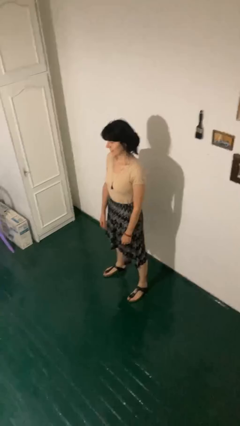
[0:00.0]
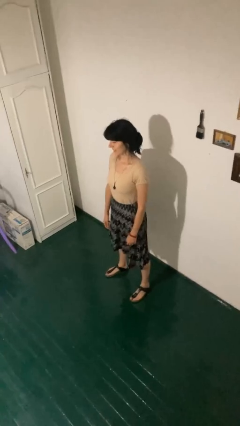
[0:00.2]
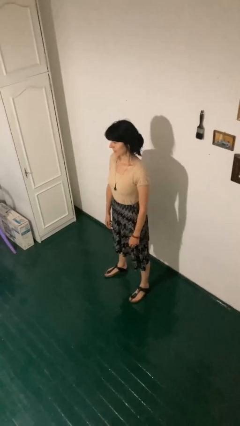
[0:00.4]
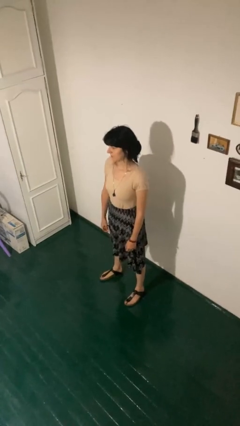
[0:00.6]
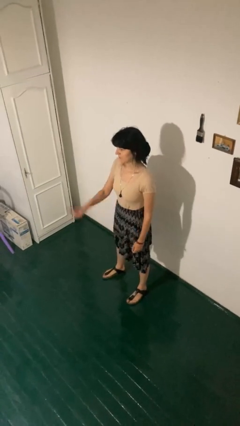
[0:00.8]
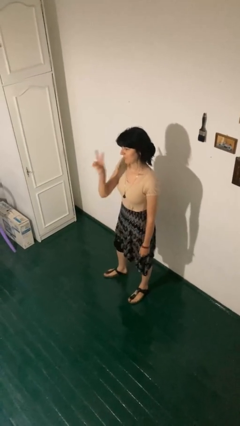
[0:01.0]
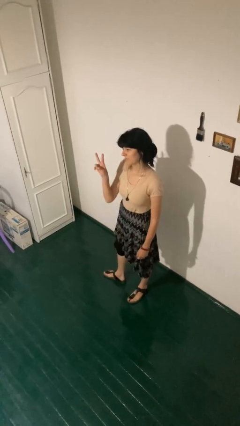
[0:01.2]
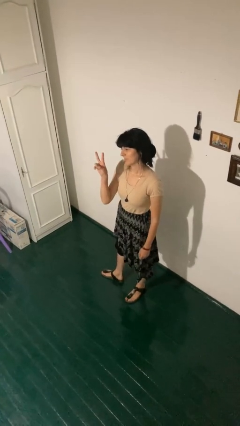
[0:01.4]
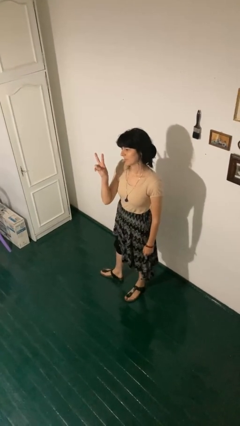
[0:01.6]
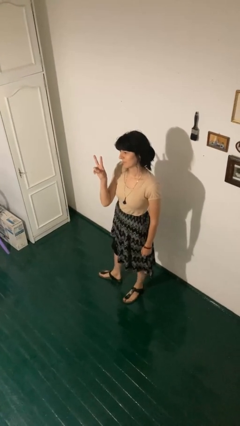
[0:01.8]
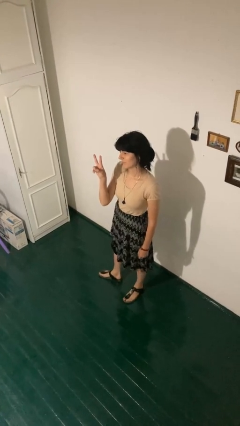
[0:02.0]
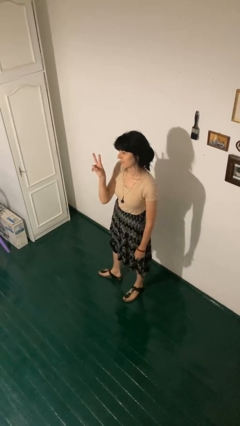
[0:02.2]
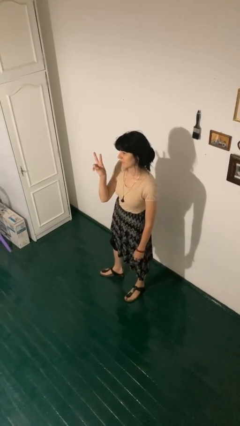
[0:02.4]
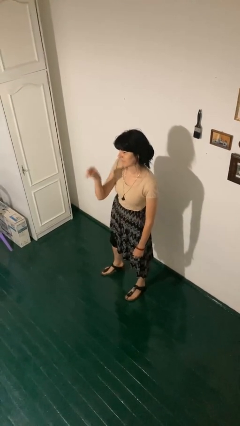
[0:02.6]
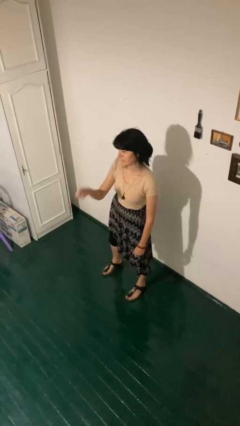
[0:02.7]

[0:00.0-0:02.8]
person gestures peace

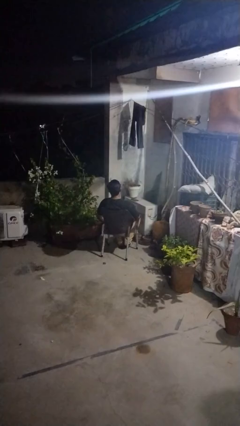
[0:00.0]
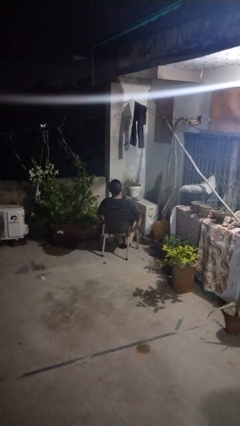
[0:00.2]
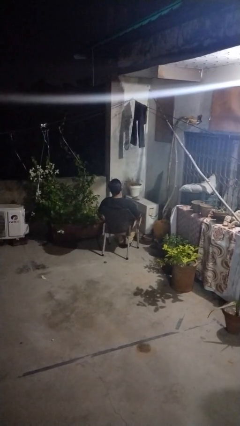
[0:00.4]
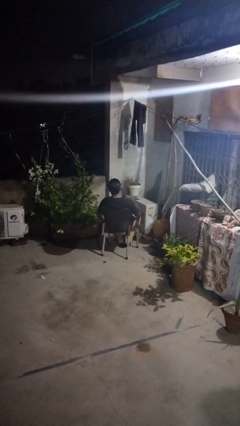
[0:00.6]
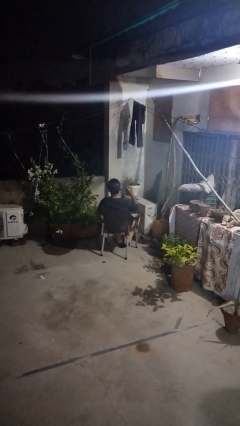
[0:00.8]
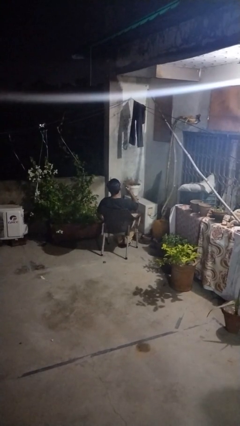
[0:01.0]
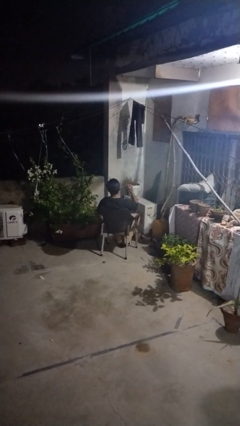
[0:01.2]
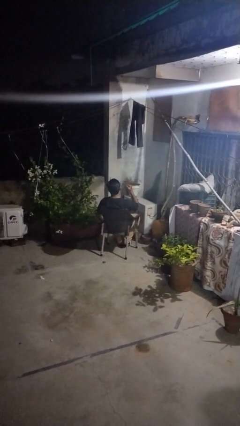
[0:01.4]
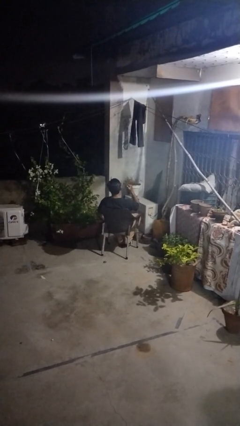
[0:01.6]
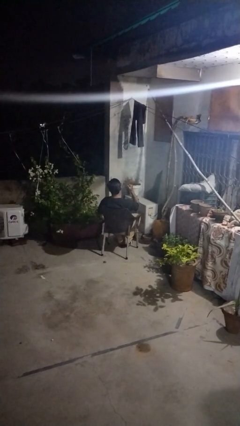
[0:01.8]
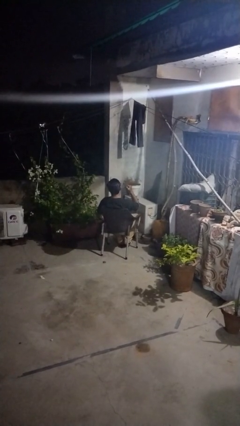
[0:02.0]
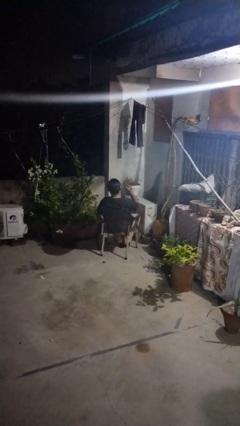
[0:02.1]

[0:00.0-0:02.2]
person gestures behind me

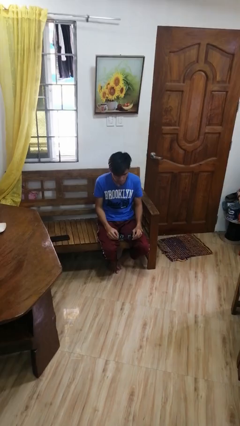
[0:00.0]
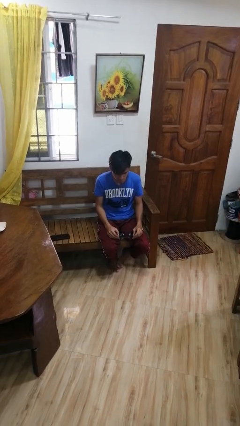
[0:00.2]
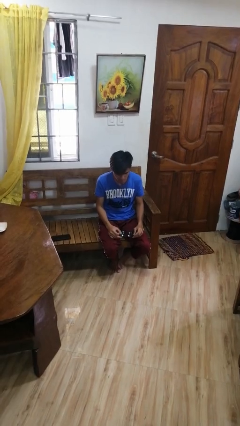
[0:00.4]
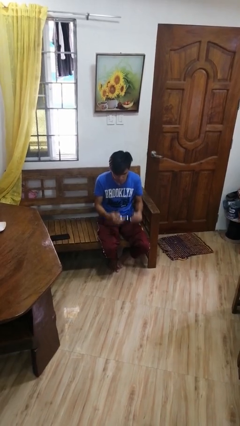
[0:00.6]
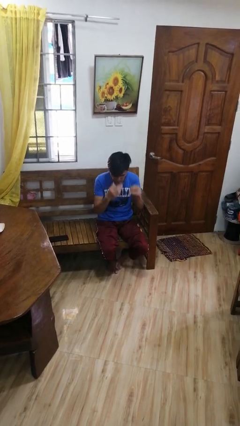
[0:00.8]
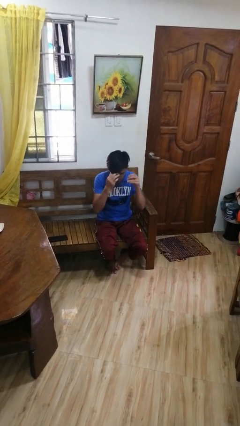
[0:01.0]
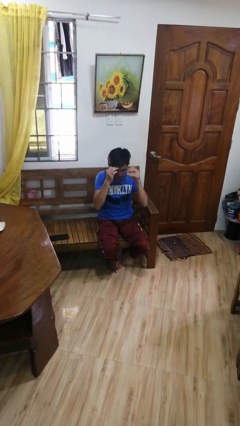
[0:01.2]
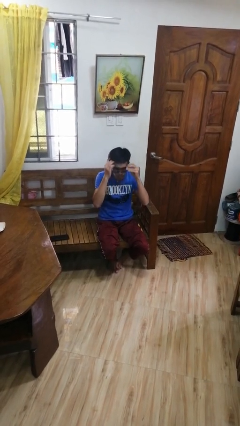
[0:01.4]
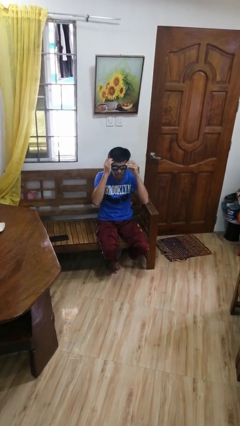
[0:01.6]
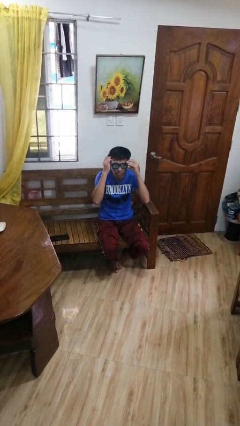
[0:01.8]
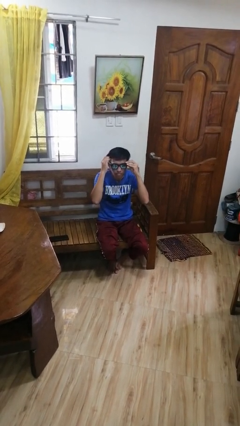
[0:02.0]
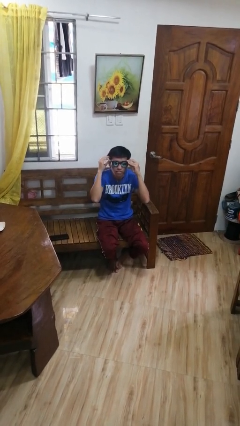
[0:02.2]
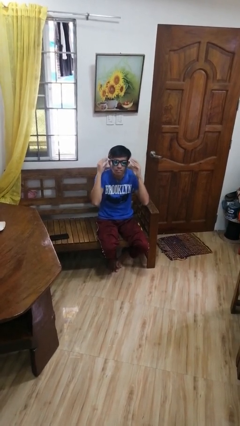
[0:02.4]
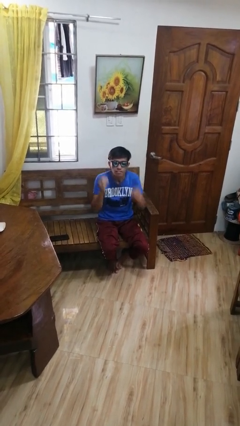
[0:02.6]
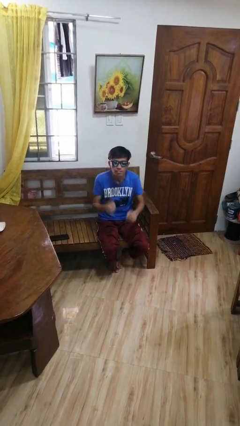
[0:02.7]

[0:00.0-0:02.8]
person puts on sunglasses

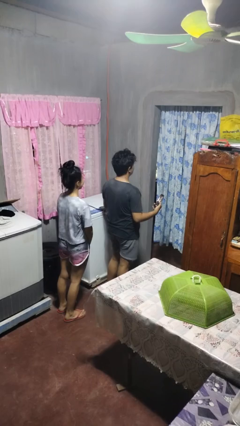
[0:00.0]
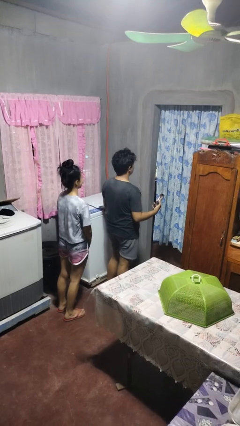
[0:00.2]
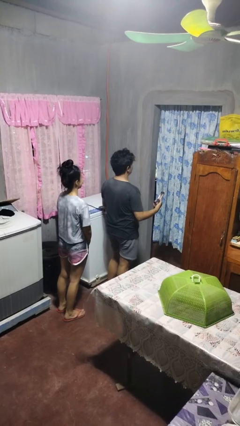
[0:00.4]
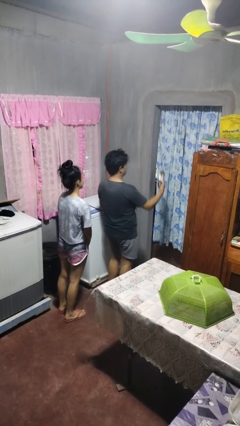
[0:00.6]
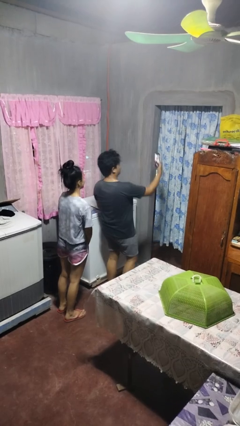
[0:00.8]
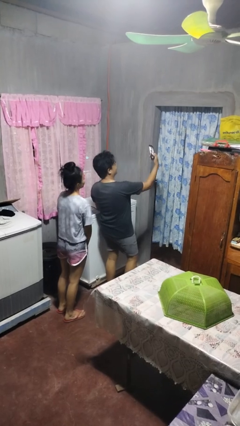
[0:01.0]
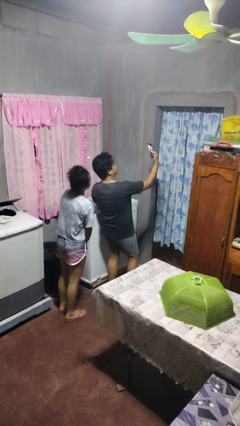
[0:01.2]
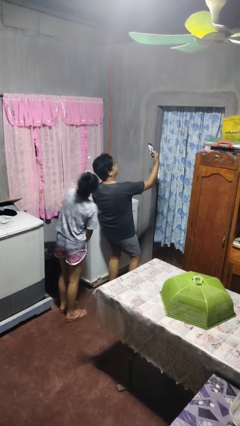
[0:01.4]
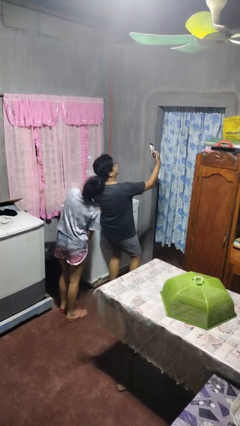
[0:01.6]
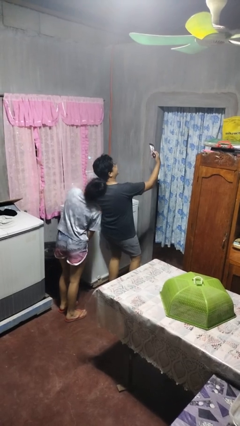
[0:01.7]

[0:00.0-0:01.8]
person takes selfie with person

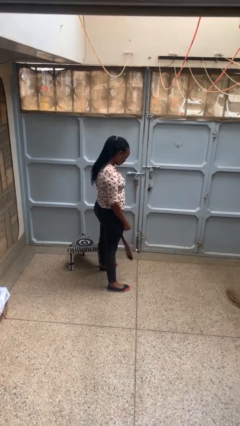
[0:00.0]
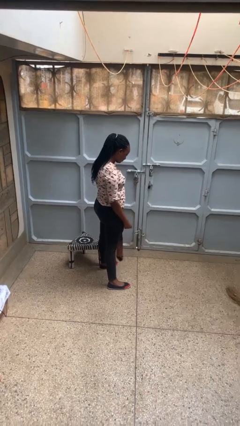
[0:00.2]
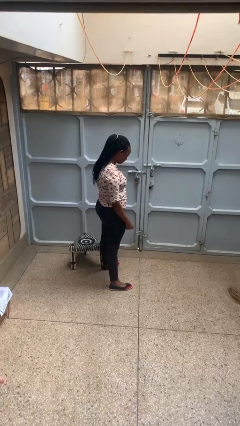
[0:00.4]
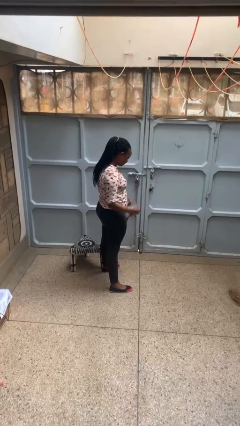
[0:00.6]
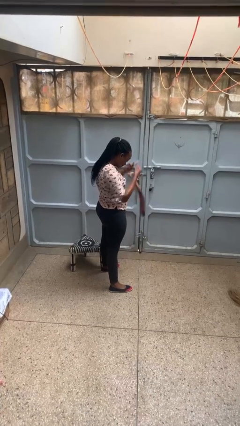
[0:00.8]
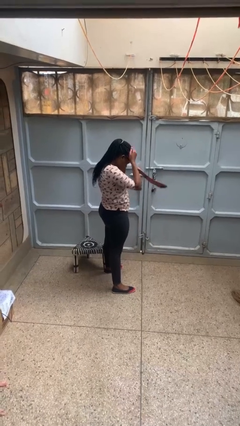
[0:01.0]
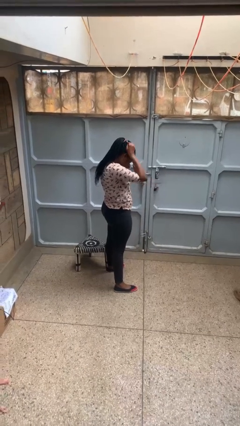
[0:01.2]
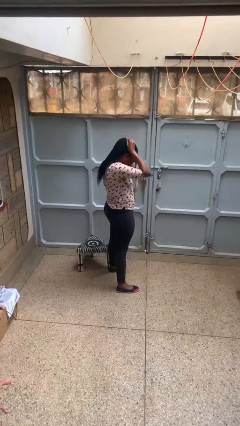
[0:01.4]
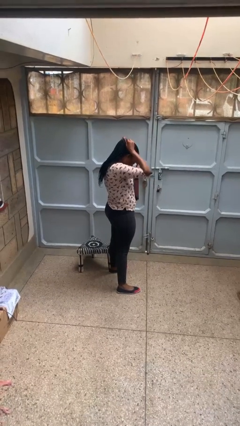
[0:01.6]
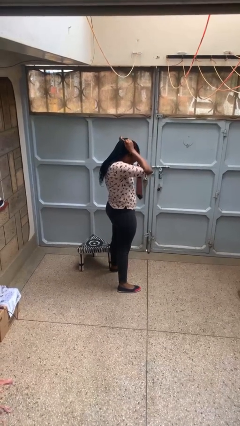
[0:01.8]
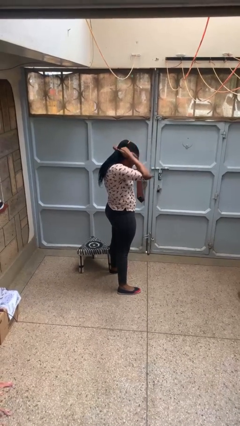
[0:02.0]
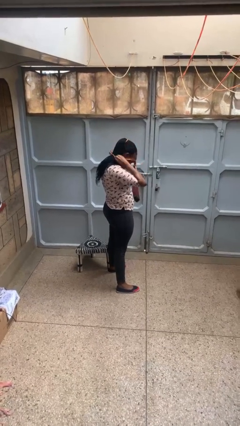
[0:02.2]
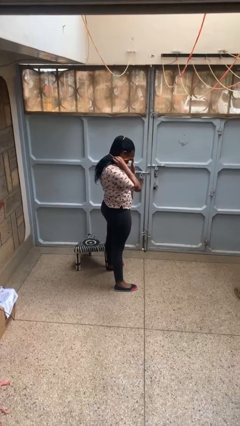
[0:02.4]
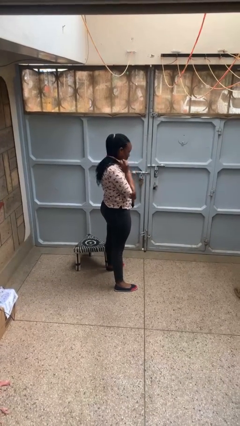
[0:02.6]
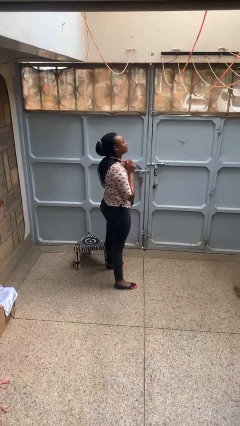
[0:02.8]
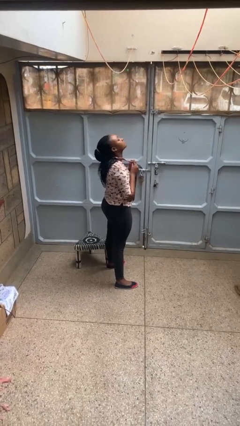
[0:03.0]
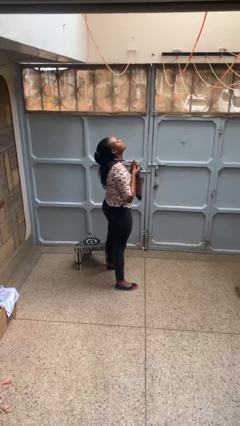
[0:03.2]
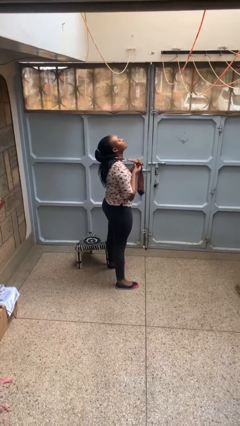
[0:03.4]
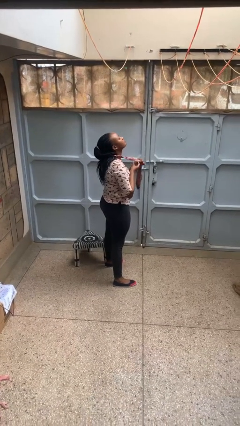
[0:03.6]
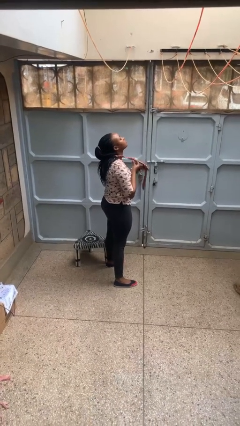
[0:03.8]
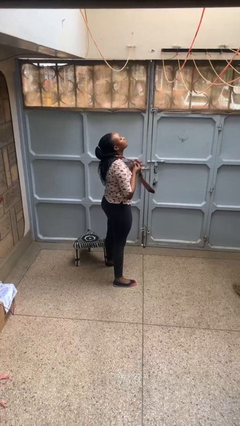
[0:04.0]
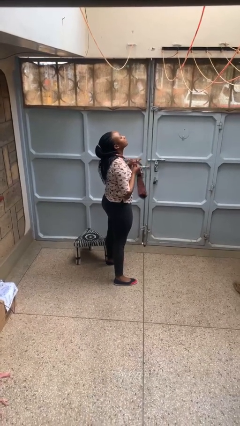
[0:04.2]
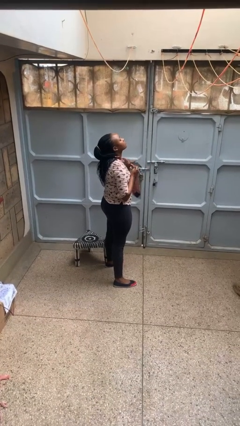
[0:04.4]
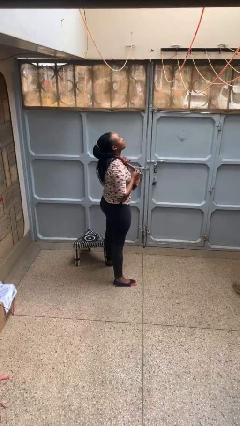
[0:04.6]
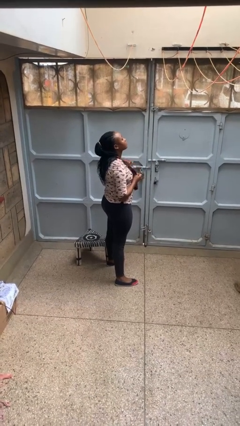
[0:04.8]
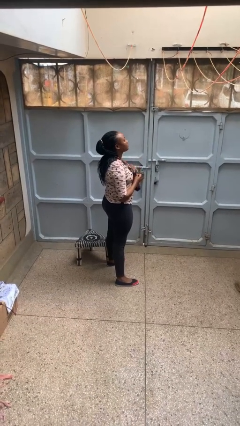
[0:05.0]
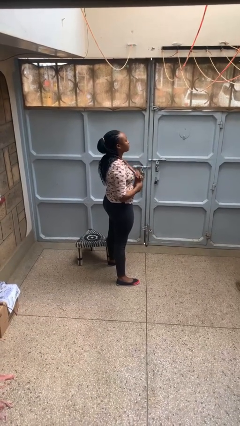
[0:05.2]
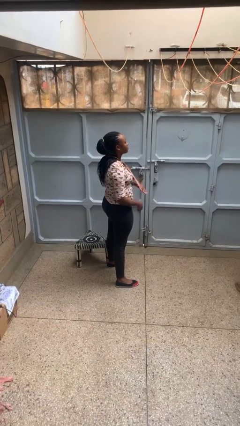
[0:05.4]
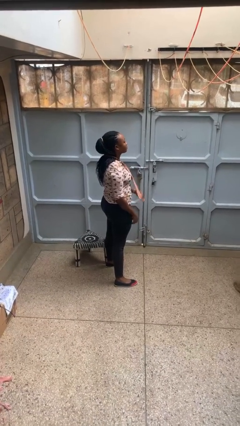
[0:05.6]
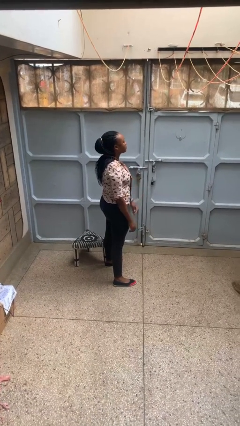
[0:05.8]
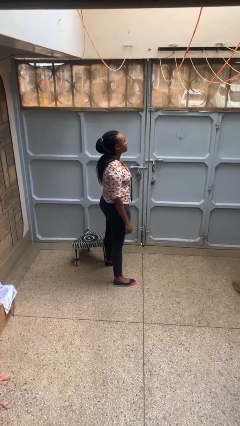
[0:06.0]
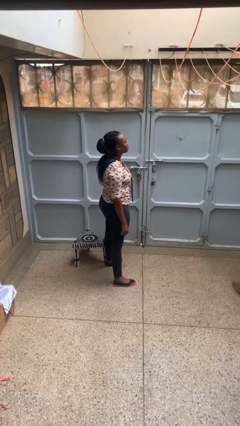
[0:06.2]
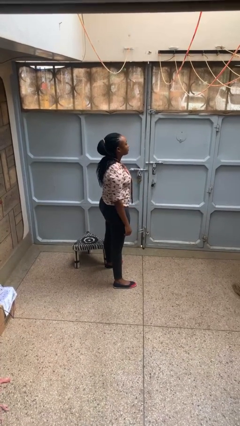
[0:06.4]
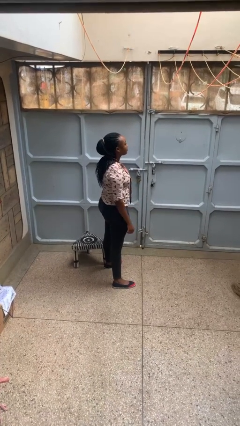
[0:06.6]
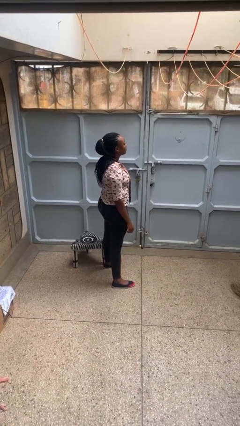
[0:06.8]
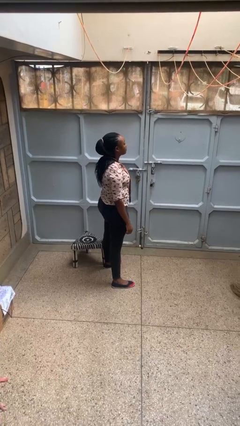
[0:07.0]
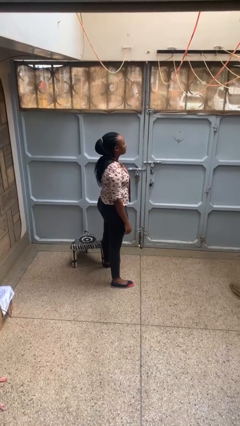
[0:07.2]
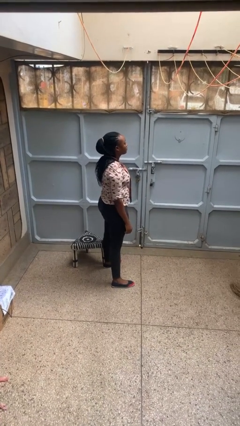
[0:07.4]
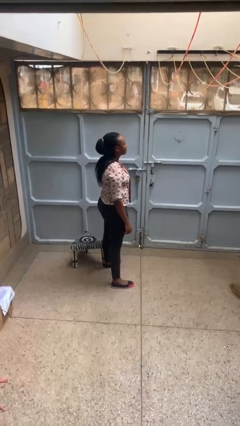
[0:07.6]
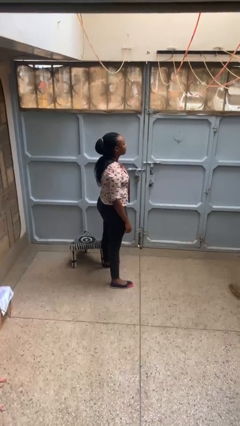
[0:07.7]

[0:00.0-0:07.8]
person puts on necktie
